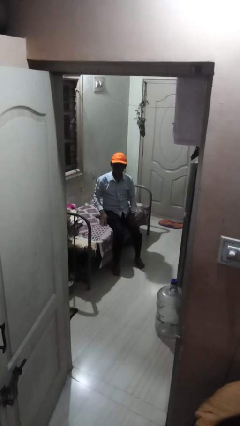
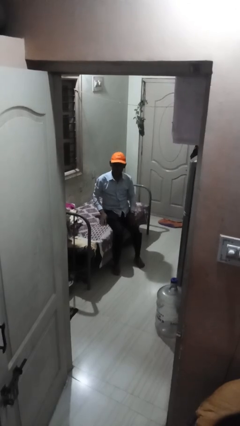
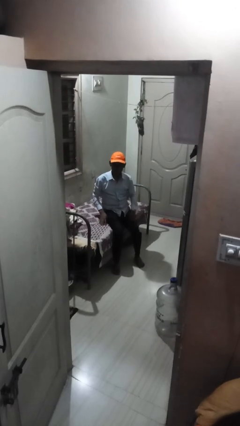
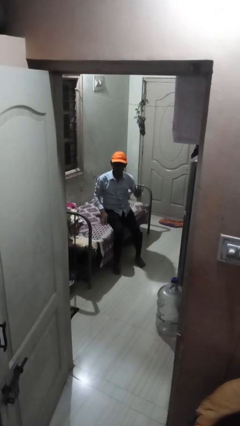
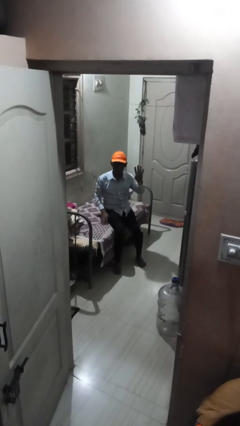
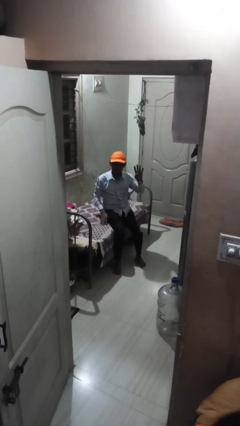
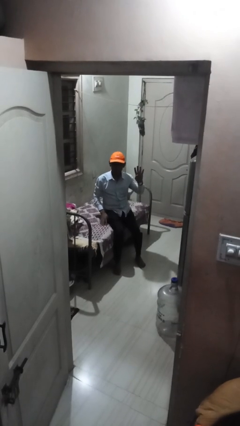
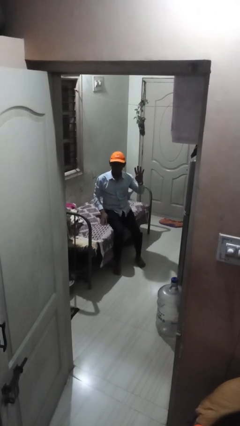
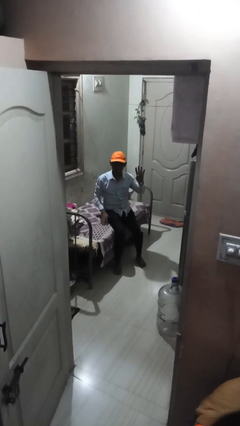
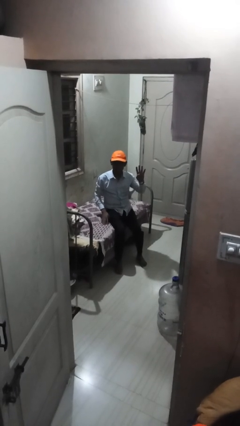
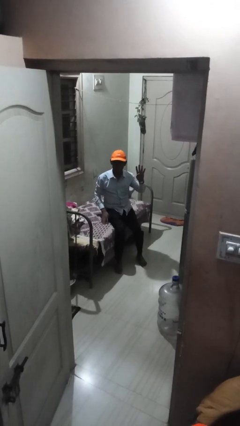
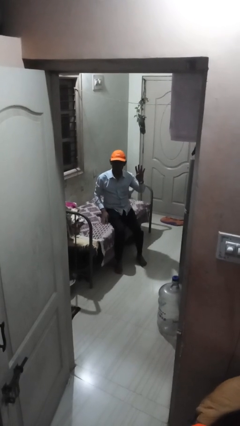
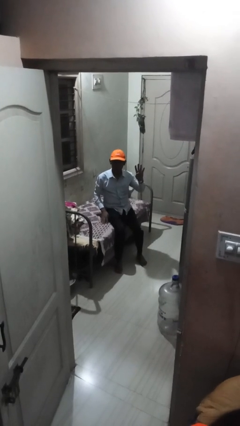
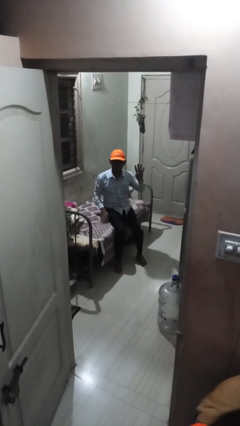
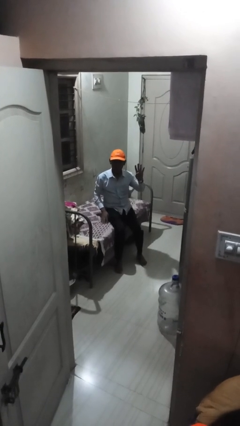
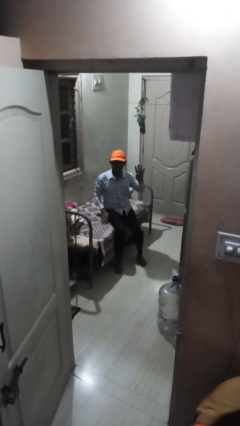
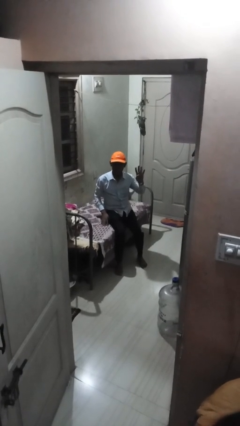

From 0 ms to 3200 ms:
person gestures number four

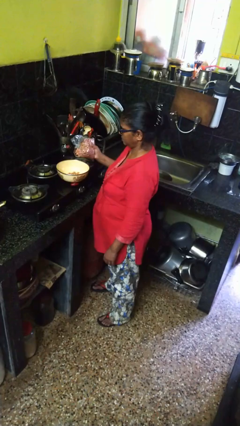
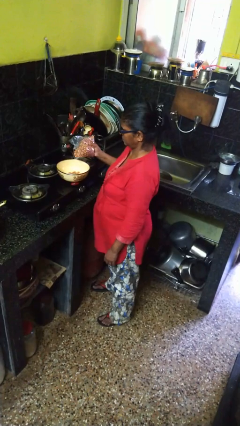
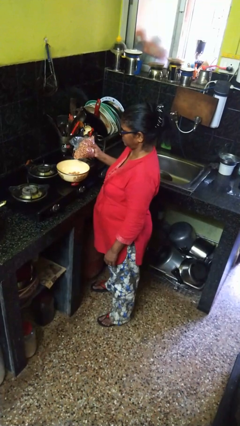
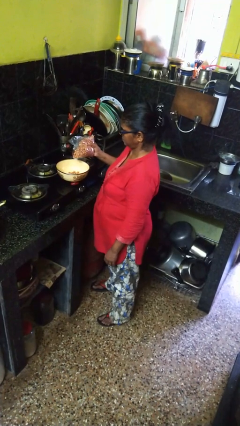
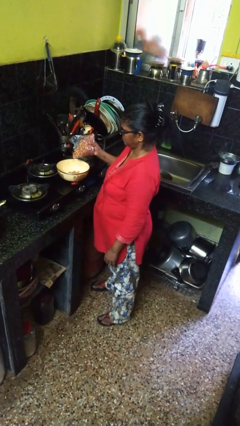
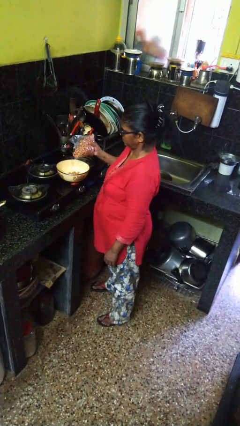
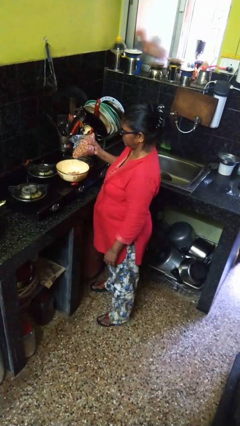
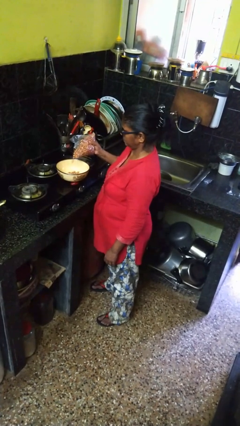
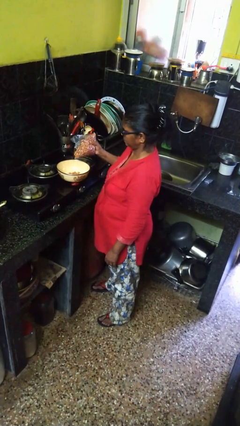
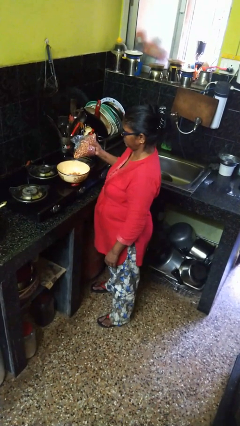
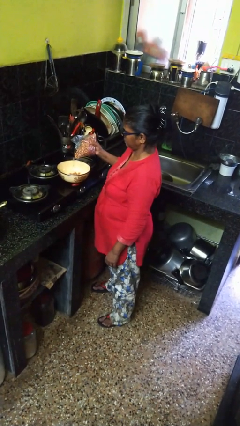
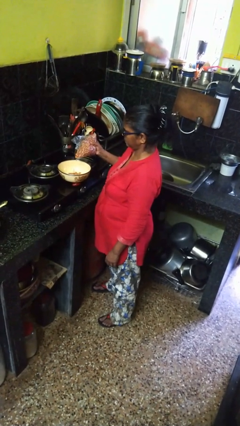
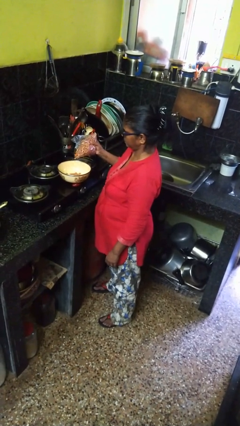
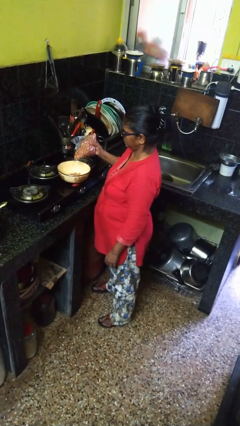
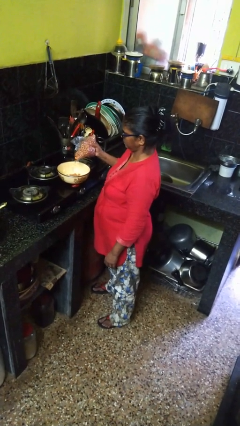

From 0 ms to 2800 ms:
person pours into bowl

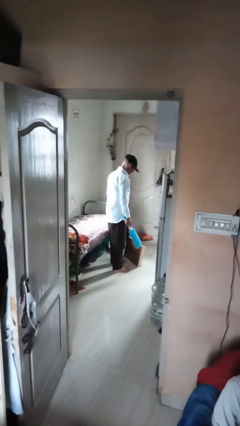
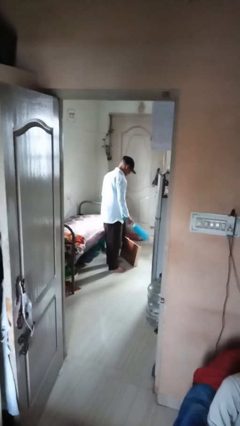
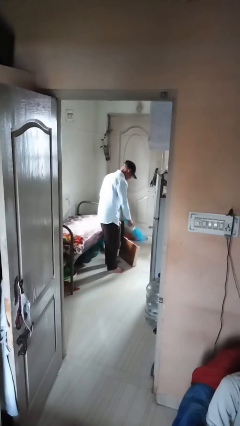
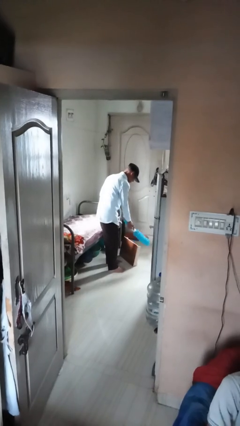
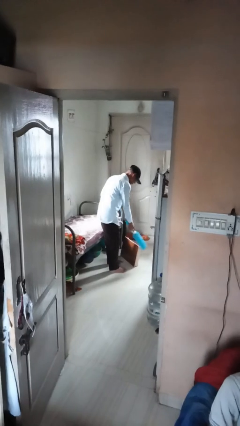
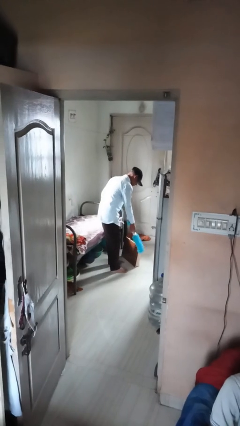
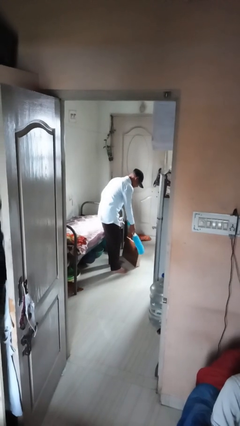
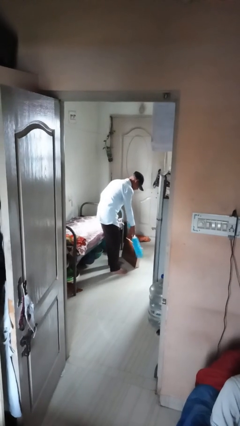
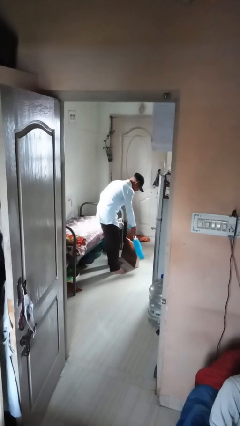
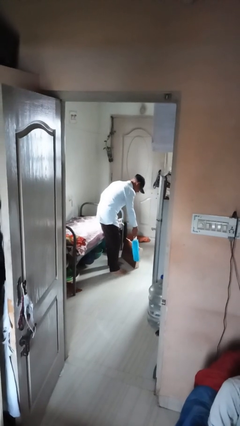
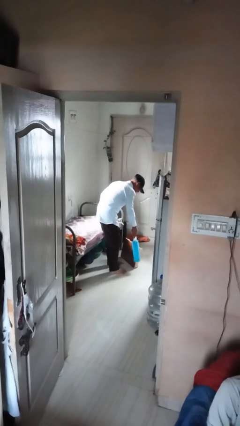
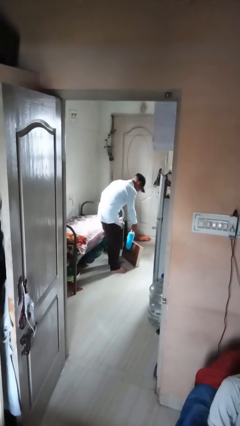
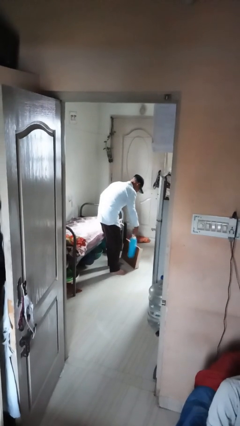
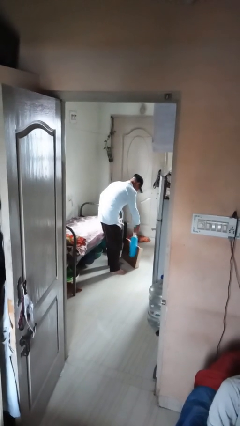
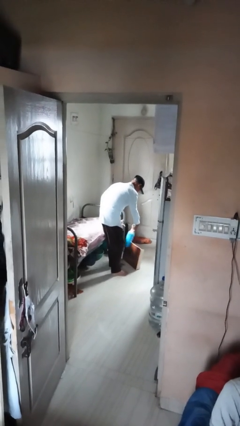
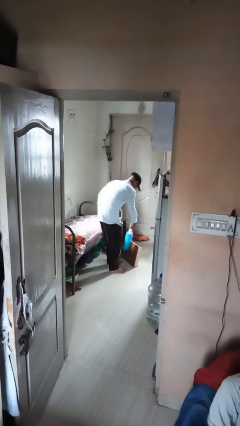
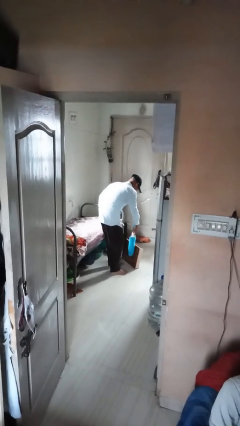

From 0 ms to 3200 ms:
person dusts furniture

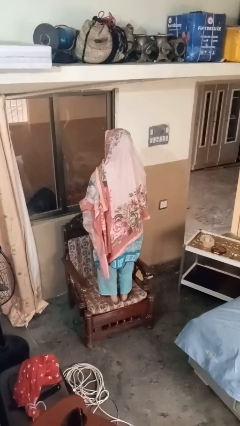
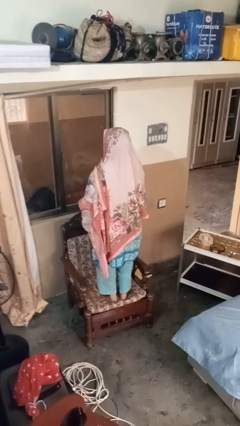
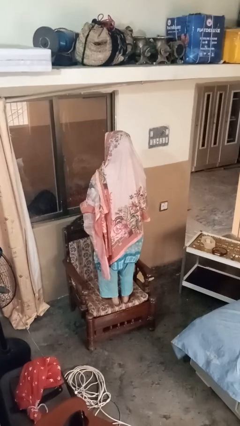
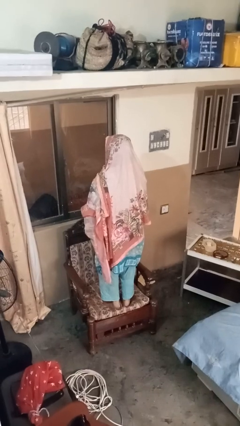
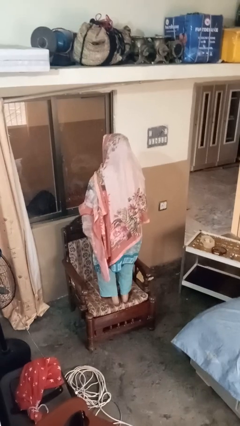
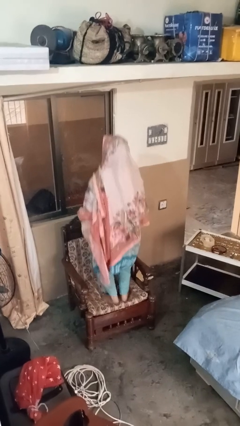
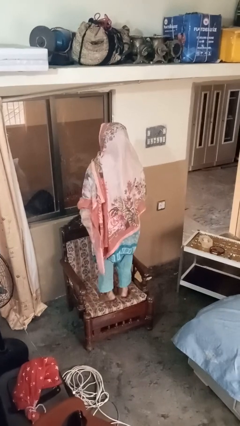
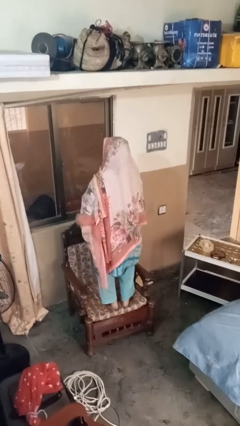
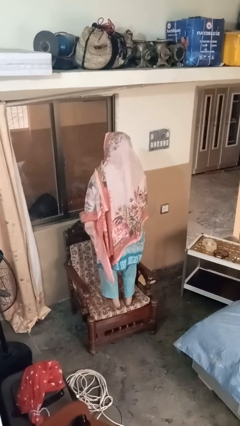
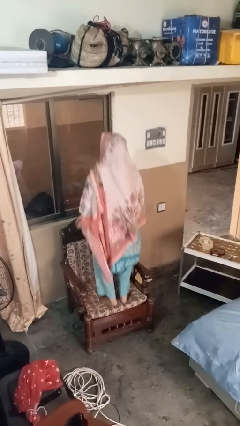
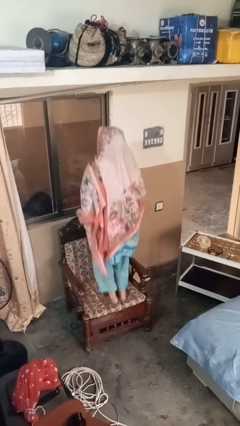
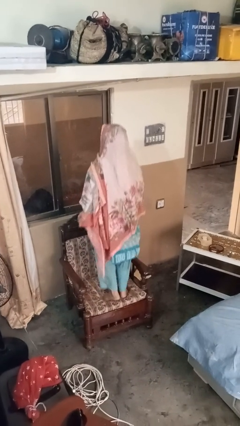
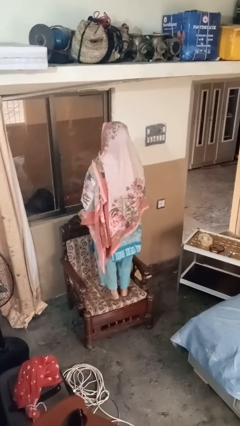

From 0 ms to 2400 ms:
person jumps on couch

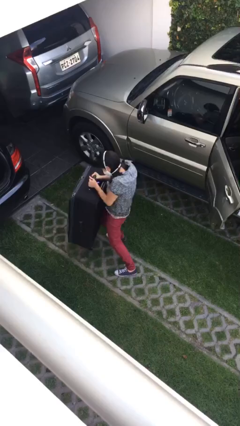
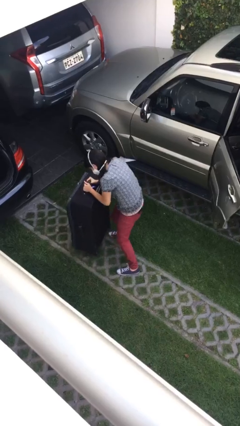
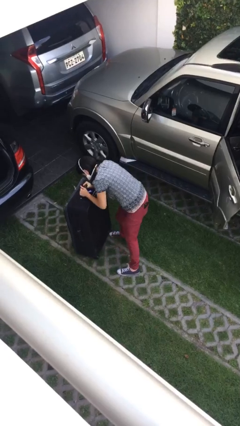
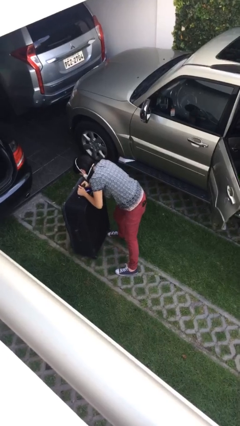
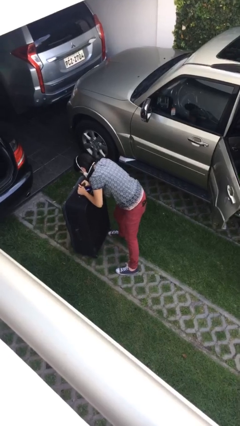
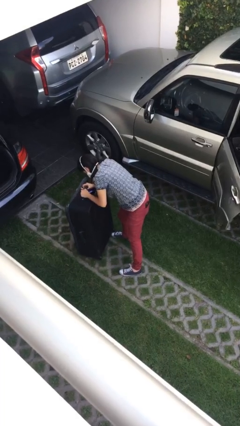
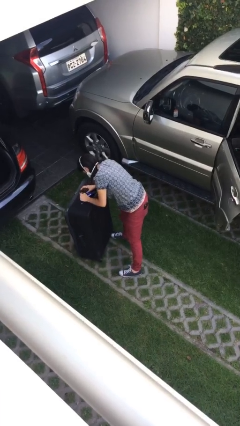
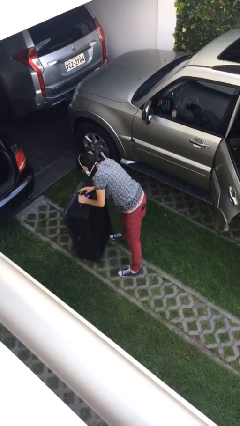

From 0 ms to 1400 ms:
person puts down object on floor

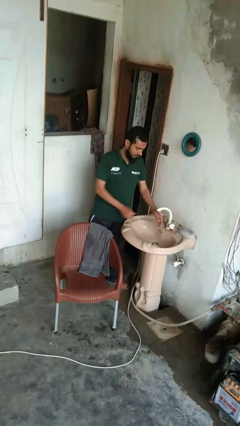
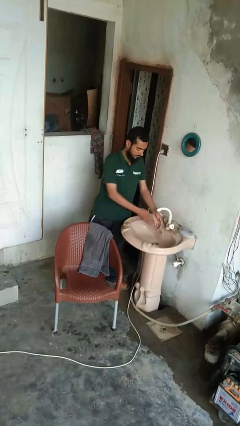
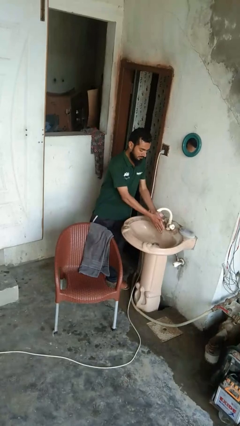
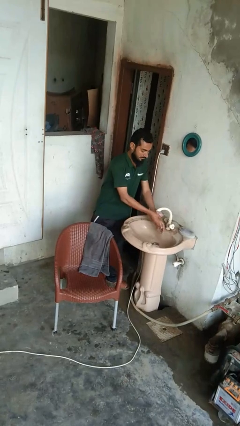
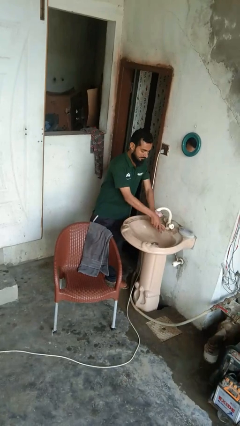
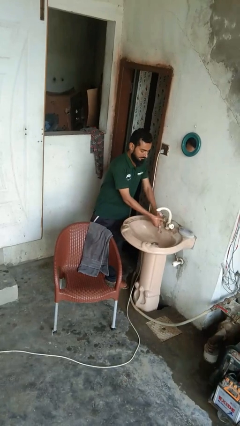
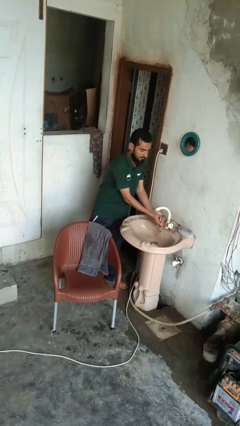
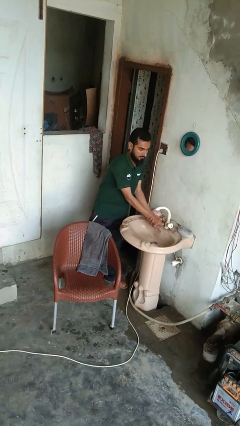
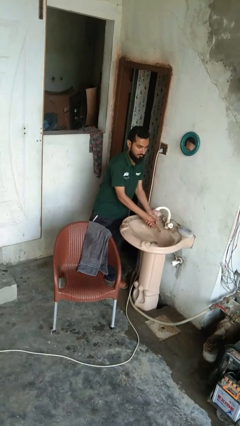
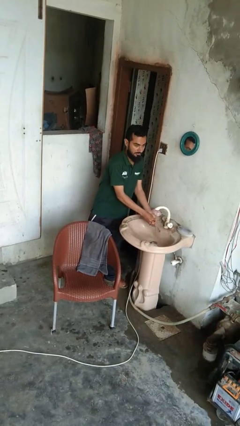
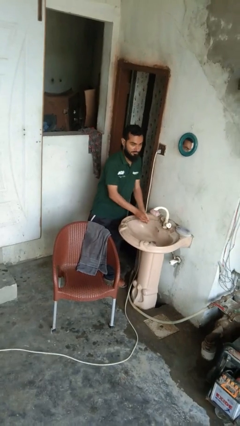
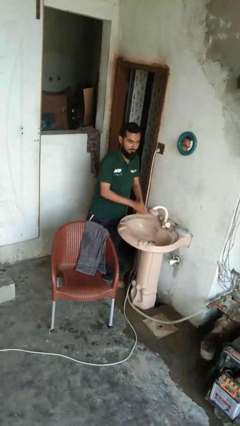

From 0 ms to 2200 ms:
person washes hands

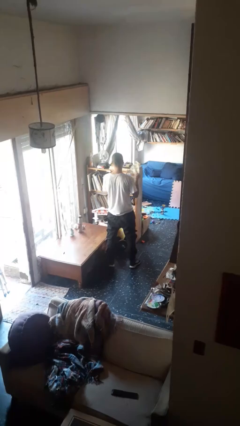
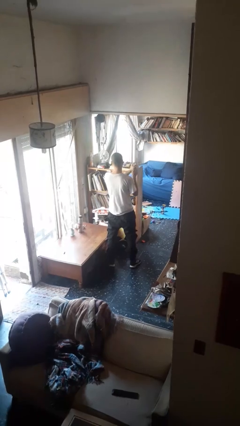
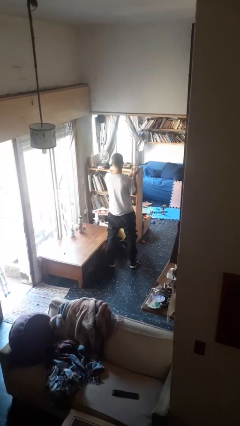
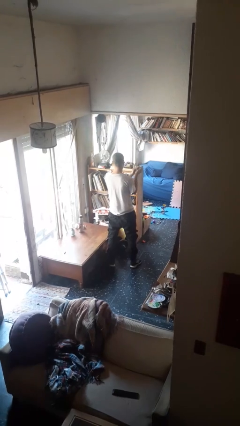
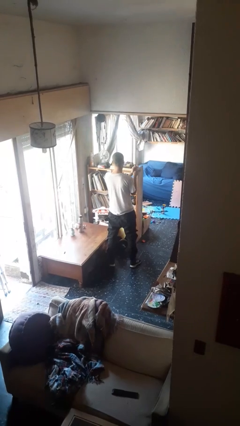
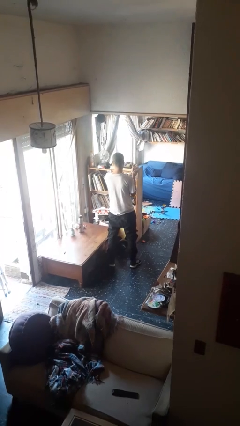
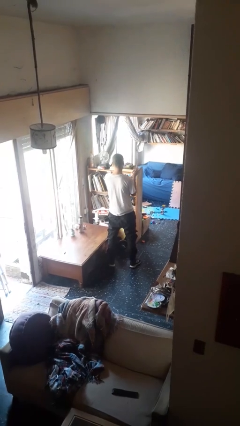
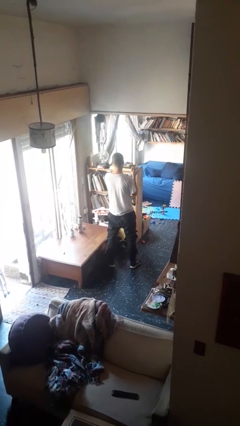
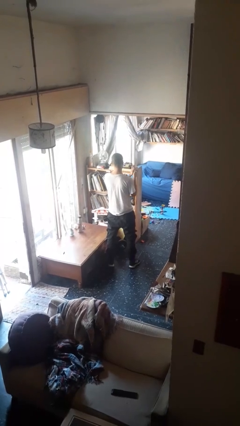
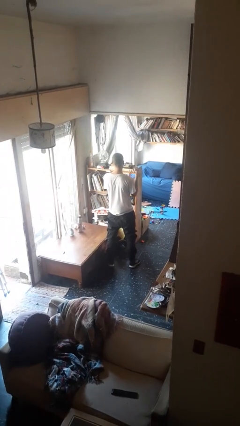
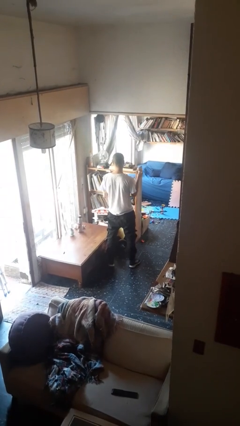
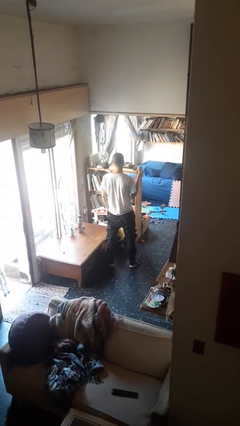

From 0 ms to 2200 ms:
person crumples paper
